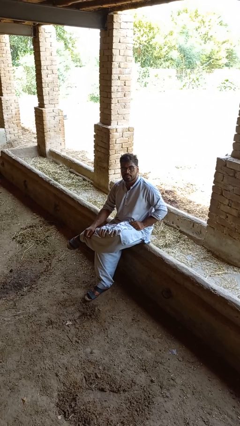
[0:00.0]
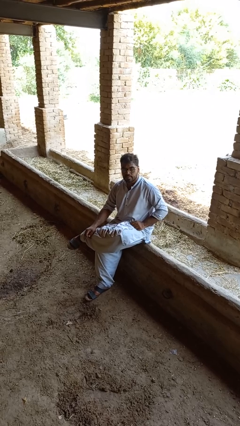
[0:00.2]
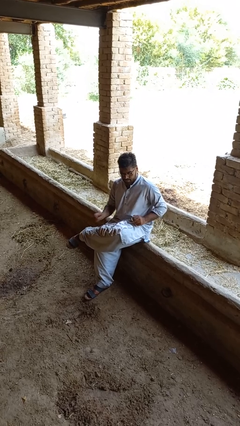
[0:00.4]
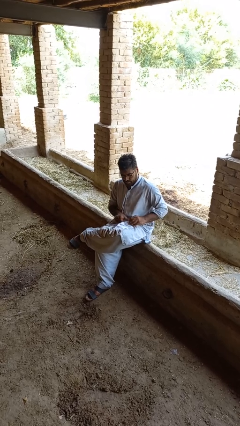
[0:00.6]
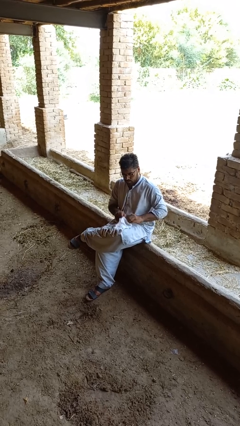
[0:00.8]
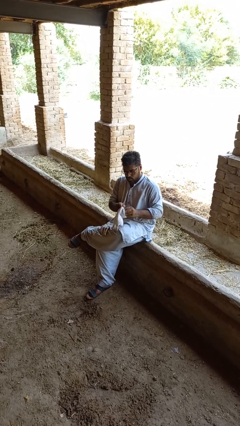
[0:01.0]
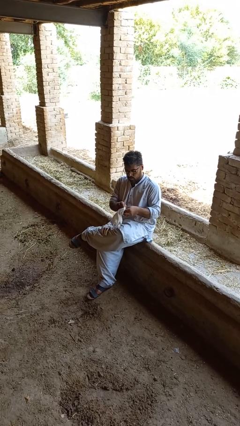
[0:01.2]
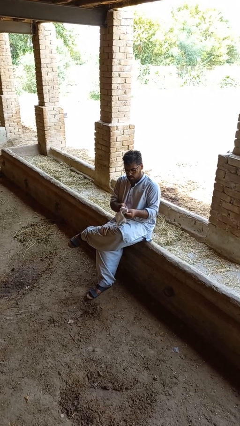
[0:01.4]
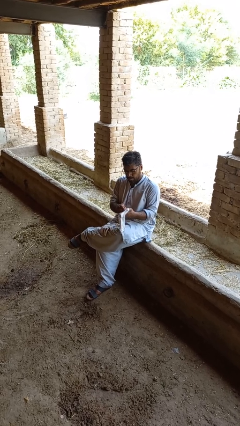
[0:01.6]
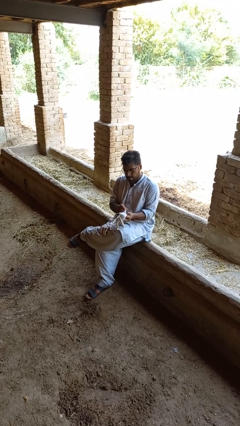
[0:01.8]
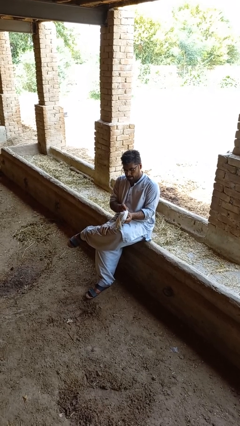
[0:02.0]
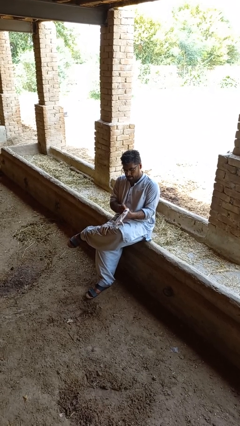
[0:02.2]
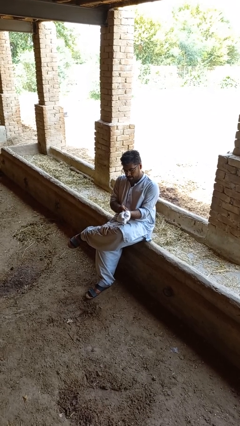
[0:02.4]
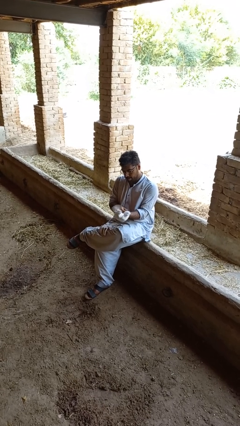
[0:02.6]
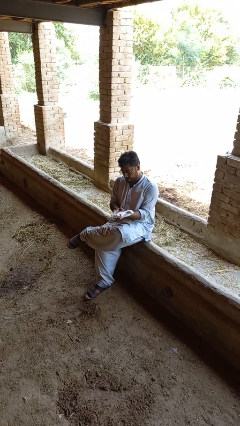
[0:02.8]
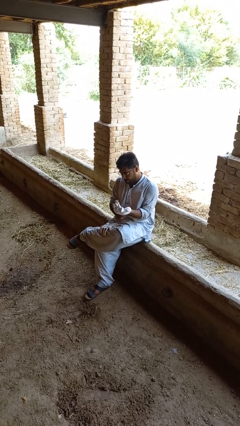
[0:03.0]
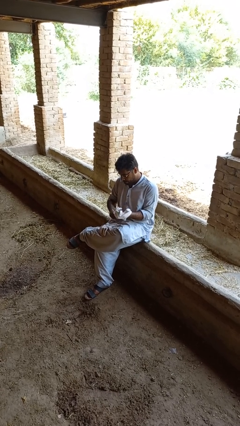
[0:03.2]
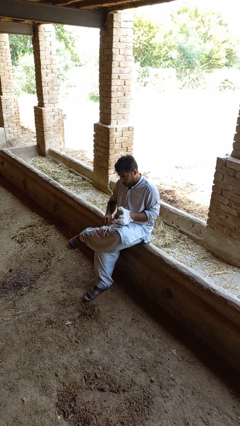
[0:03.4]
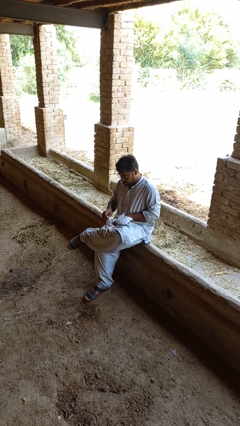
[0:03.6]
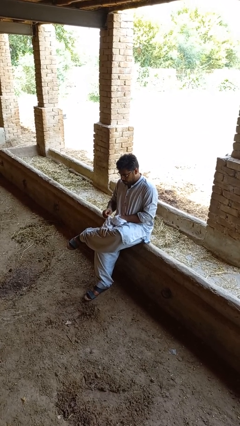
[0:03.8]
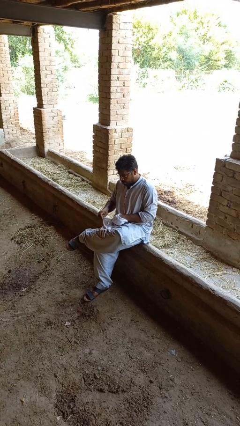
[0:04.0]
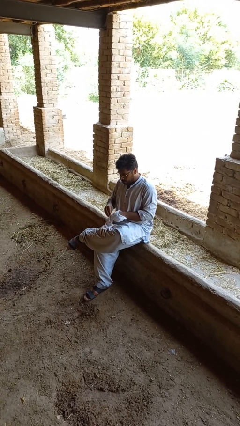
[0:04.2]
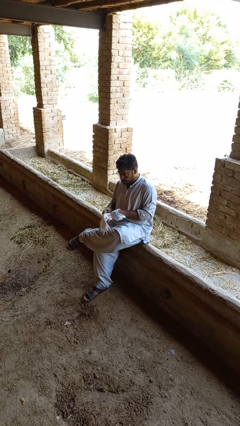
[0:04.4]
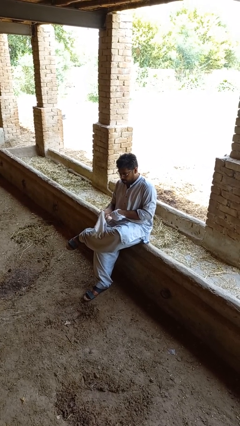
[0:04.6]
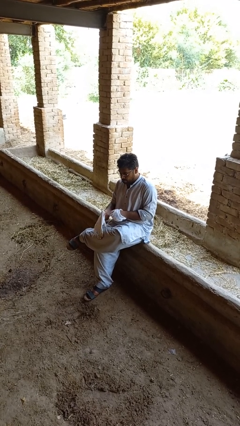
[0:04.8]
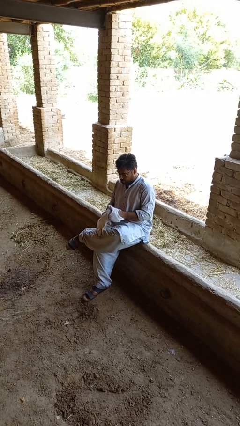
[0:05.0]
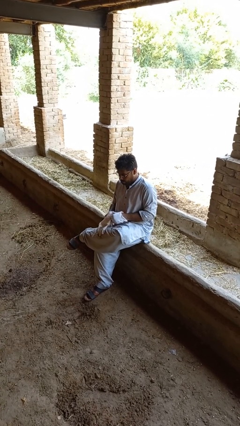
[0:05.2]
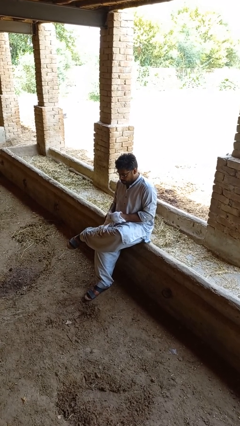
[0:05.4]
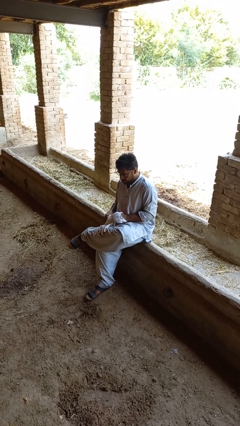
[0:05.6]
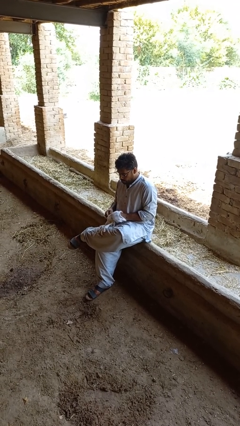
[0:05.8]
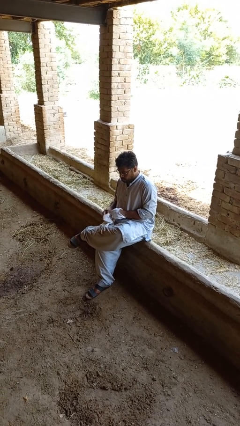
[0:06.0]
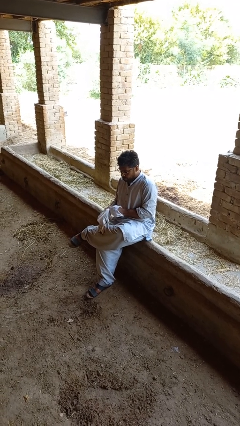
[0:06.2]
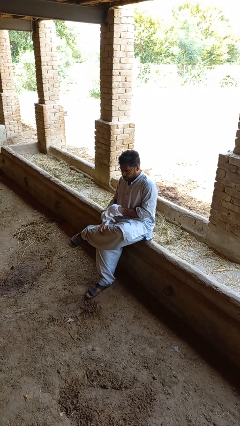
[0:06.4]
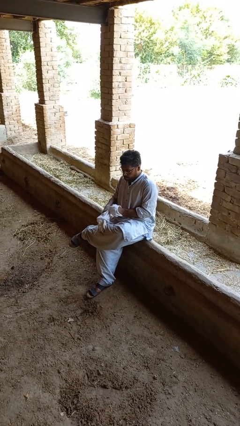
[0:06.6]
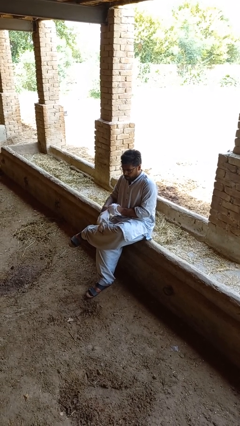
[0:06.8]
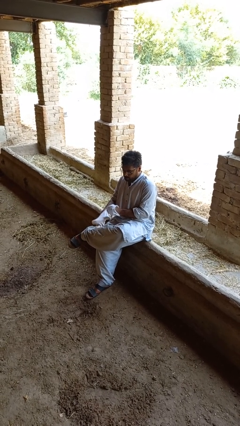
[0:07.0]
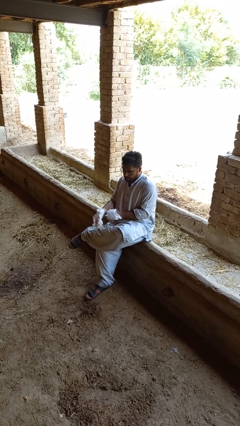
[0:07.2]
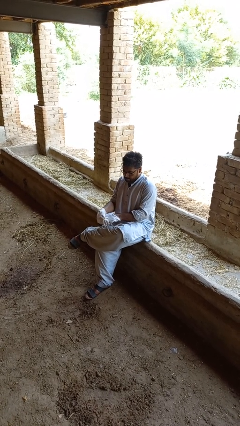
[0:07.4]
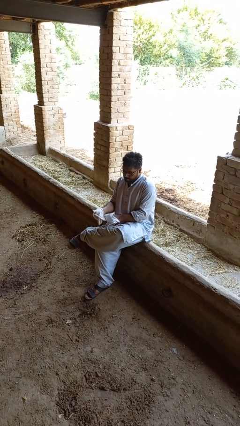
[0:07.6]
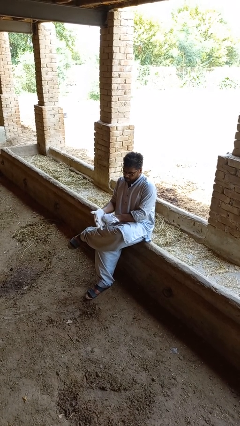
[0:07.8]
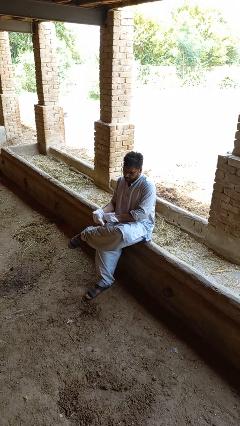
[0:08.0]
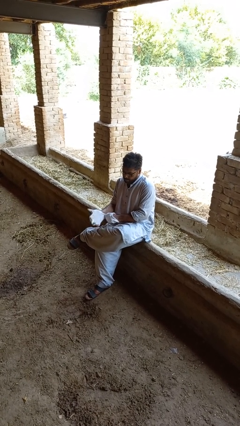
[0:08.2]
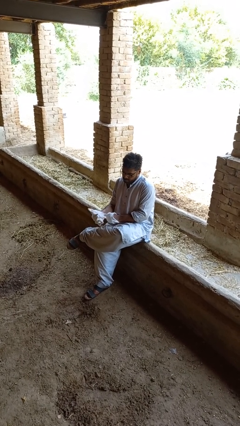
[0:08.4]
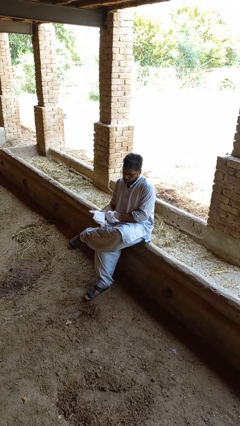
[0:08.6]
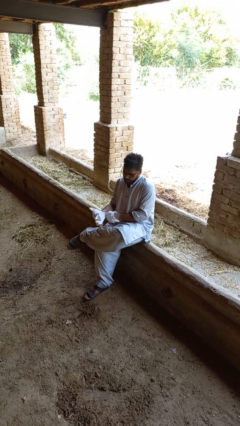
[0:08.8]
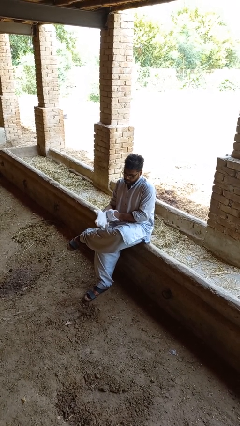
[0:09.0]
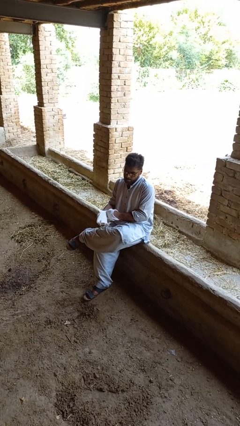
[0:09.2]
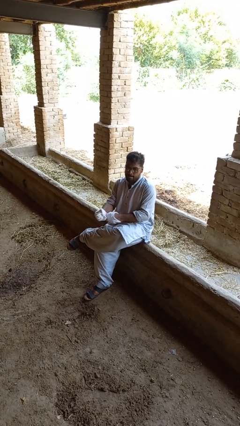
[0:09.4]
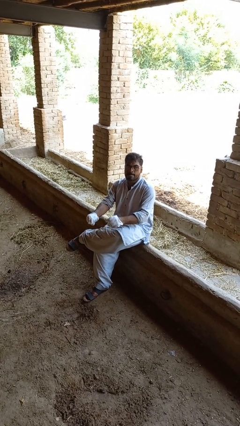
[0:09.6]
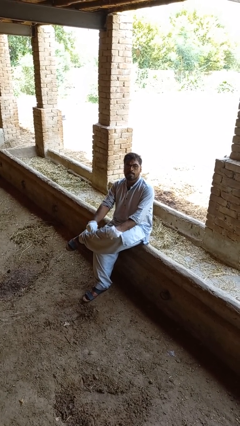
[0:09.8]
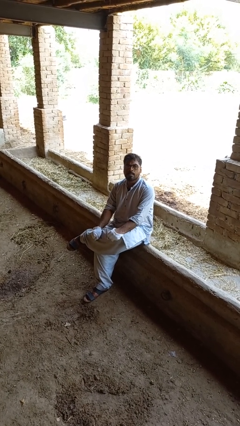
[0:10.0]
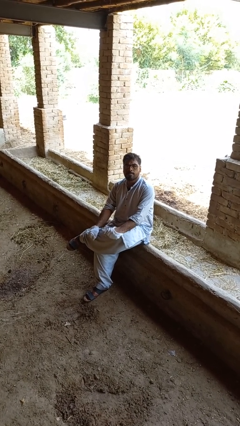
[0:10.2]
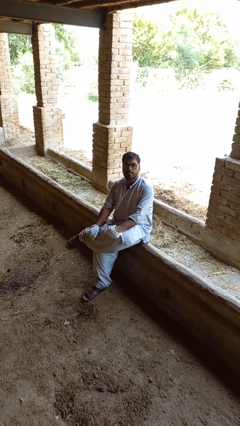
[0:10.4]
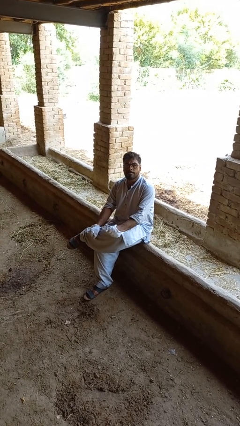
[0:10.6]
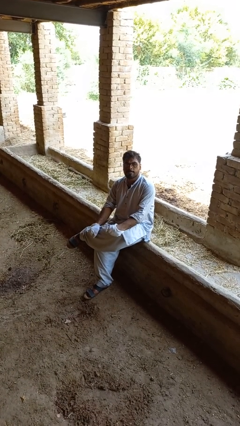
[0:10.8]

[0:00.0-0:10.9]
person puts on gloves

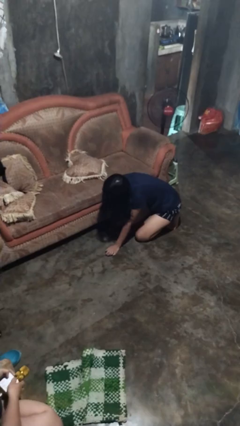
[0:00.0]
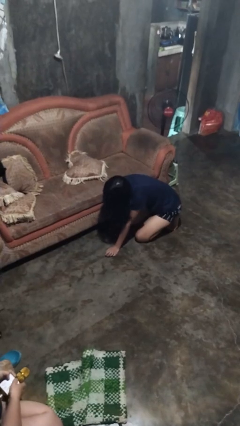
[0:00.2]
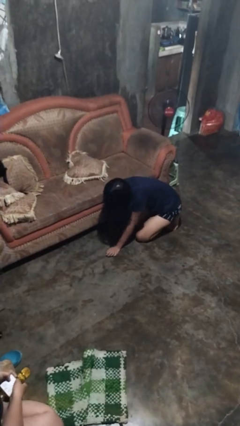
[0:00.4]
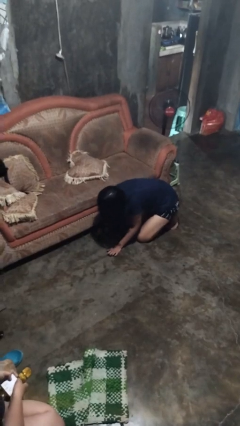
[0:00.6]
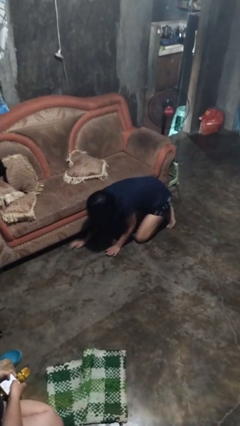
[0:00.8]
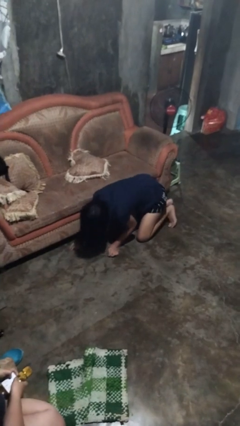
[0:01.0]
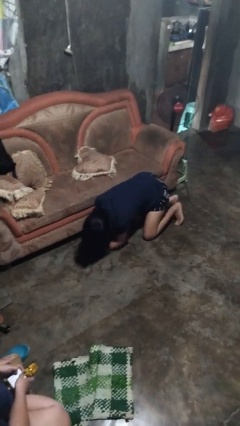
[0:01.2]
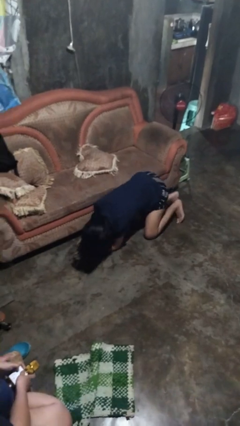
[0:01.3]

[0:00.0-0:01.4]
person searches under couch

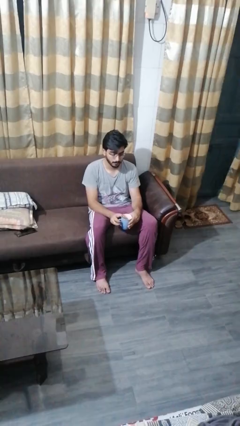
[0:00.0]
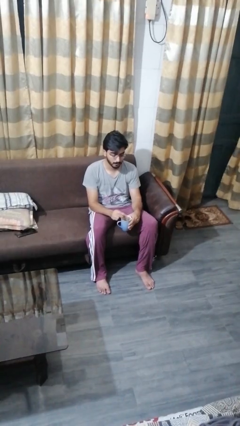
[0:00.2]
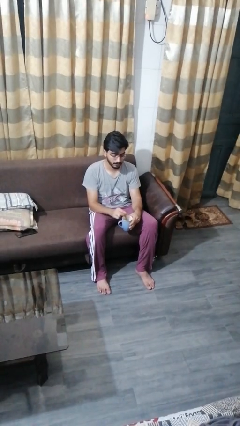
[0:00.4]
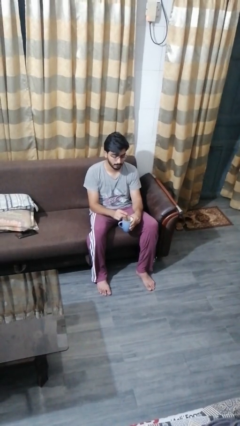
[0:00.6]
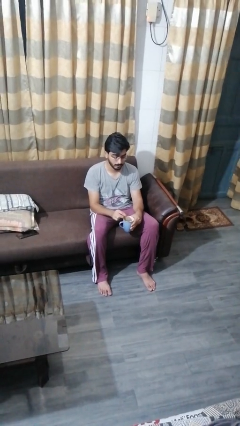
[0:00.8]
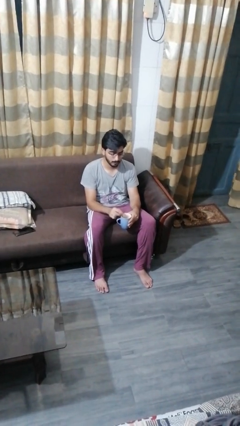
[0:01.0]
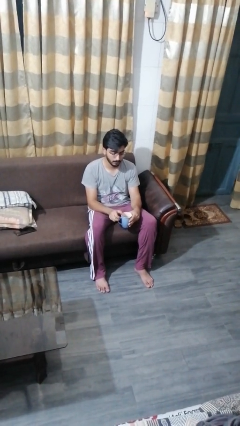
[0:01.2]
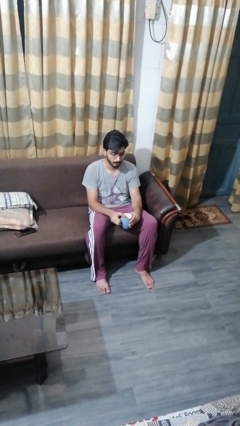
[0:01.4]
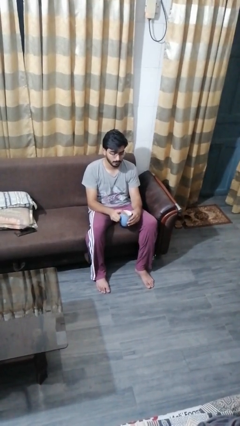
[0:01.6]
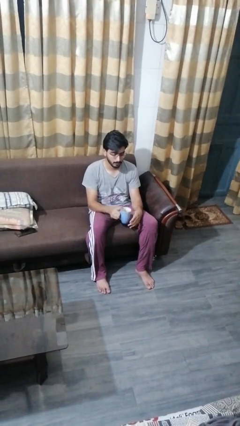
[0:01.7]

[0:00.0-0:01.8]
person stirs mug

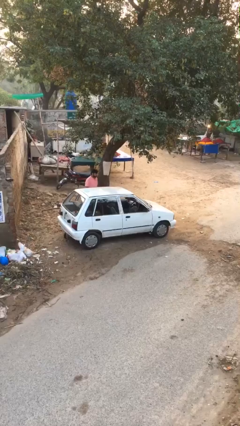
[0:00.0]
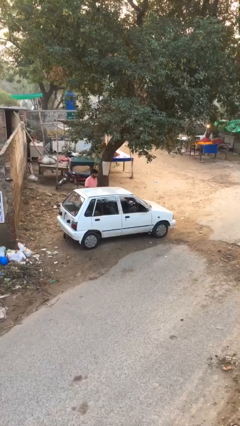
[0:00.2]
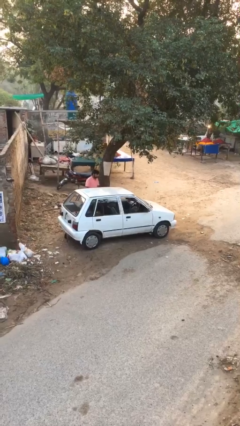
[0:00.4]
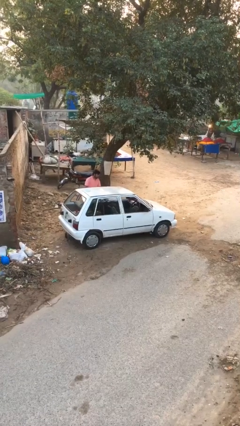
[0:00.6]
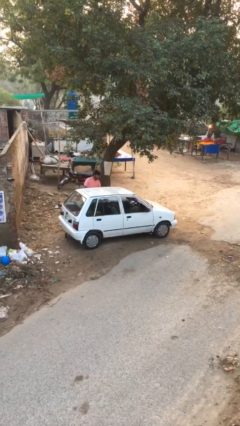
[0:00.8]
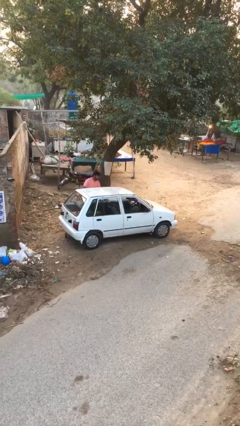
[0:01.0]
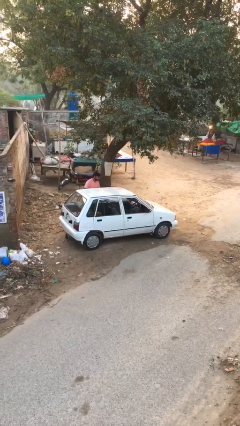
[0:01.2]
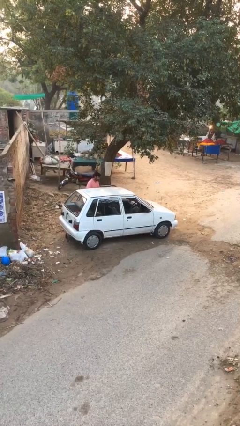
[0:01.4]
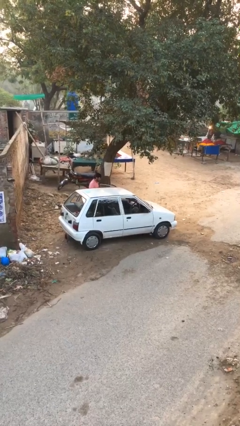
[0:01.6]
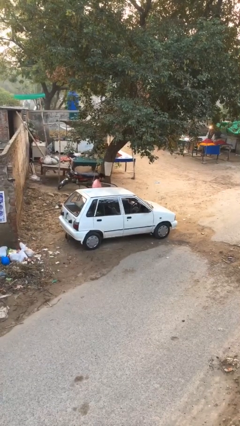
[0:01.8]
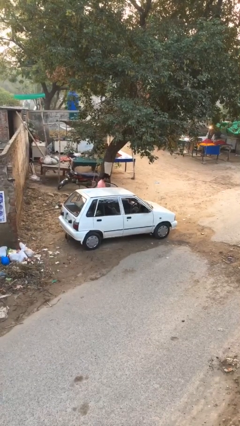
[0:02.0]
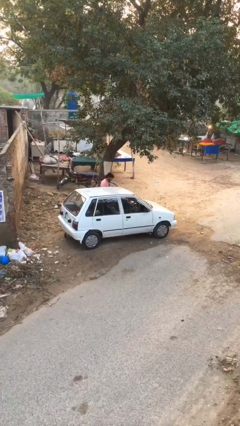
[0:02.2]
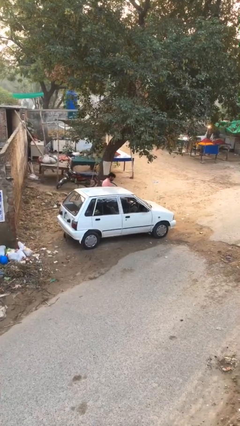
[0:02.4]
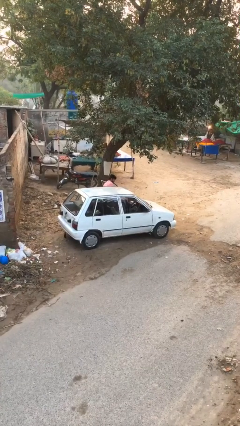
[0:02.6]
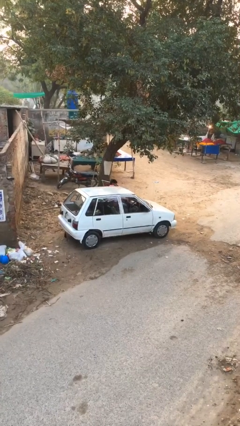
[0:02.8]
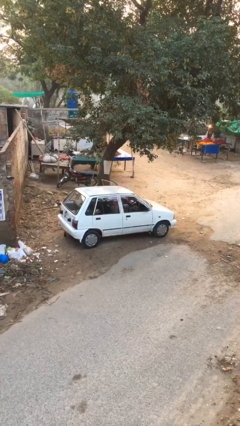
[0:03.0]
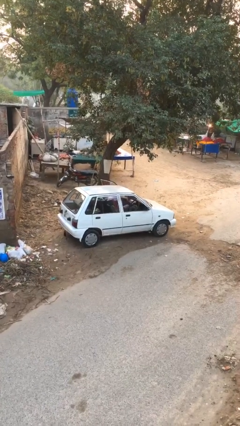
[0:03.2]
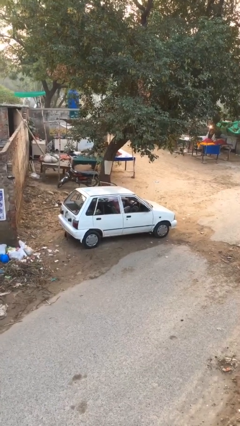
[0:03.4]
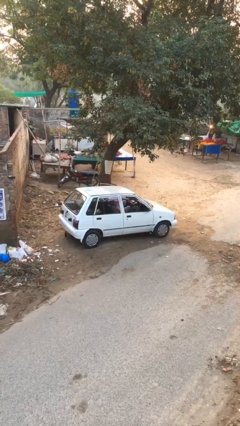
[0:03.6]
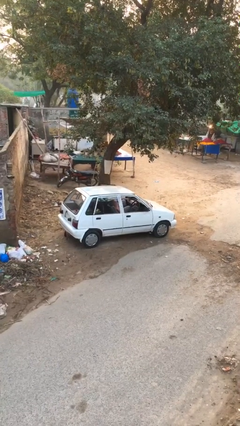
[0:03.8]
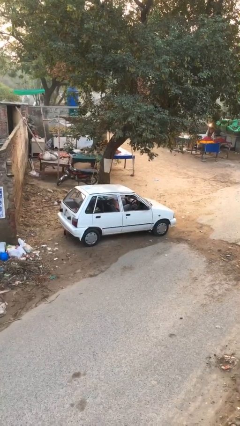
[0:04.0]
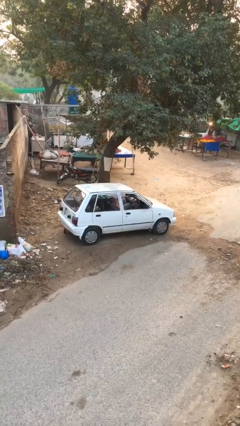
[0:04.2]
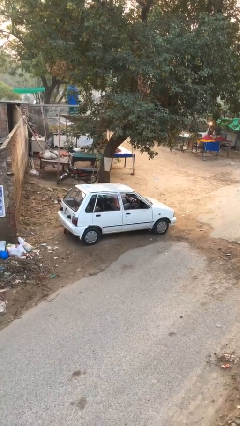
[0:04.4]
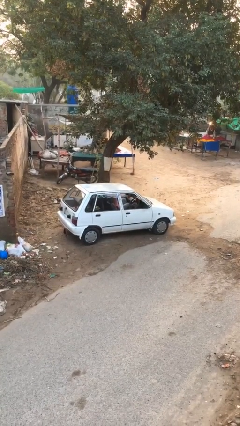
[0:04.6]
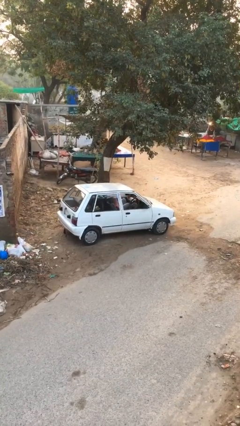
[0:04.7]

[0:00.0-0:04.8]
car picks up person
